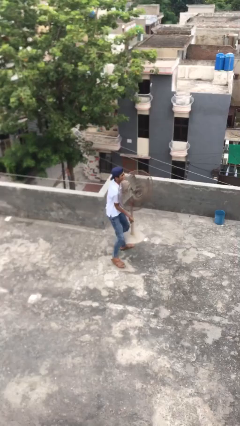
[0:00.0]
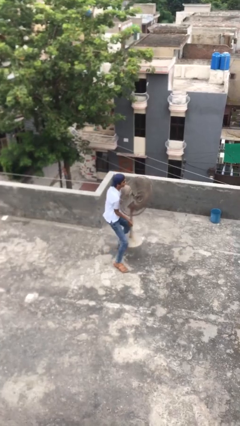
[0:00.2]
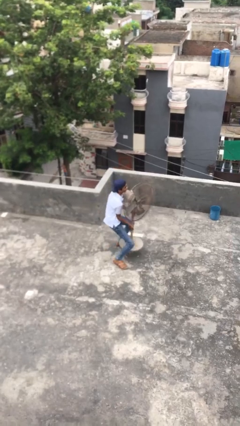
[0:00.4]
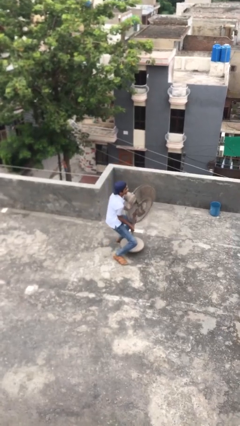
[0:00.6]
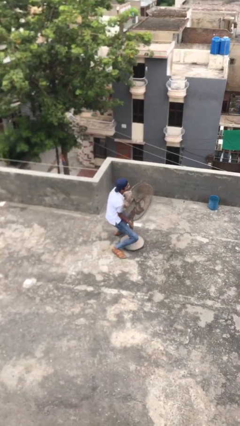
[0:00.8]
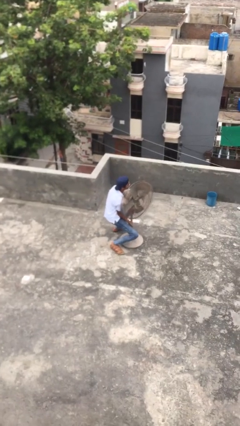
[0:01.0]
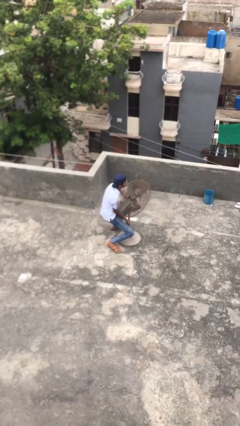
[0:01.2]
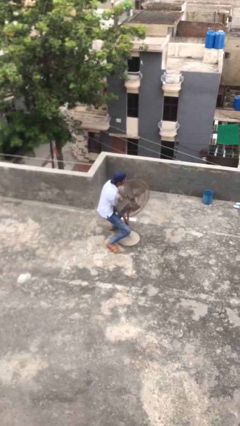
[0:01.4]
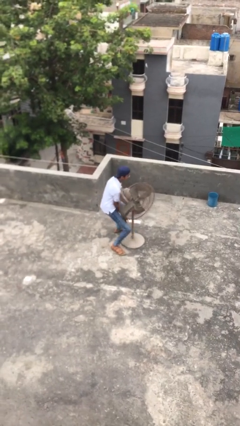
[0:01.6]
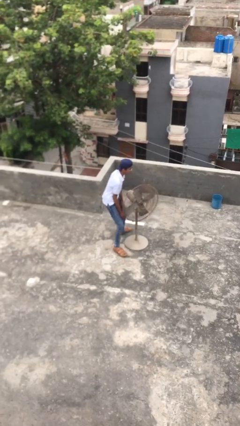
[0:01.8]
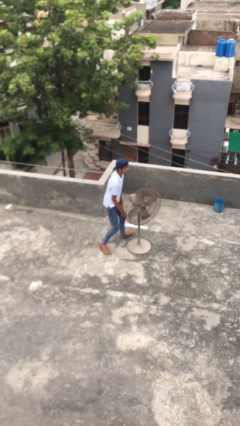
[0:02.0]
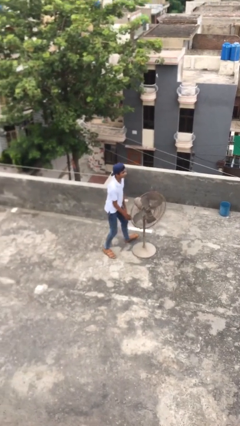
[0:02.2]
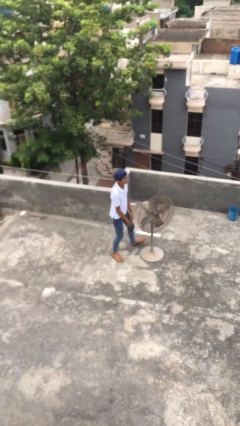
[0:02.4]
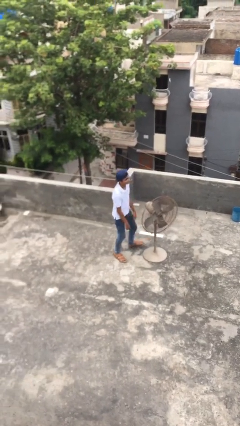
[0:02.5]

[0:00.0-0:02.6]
person puts down object on floor

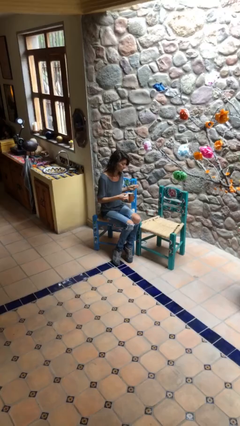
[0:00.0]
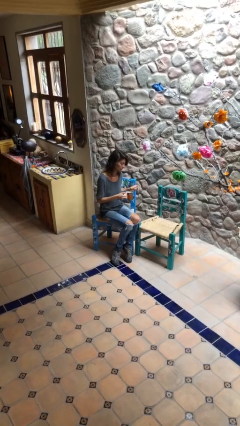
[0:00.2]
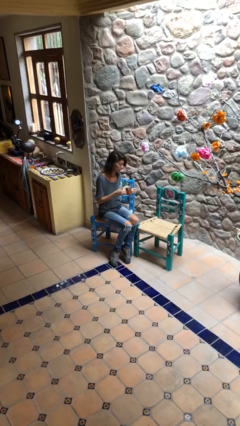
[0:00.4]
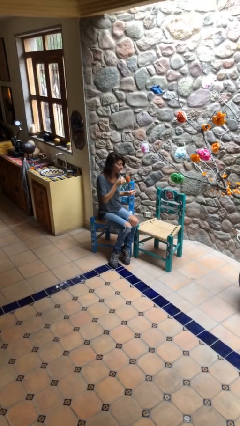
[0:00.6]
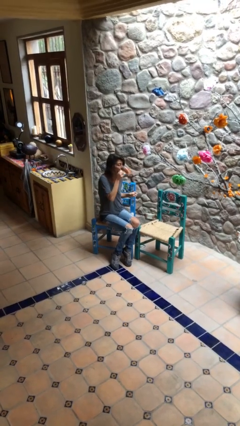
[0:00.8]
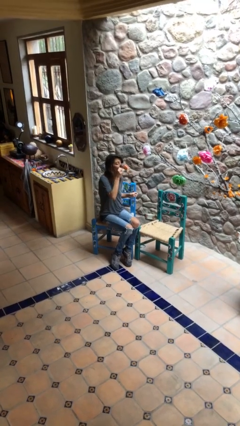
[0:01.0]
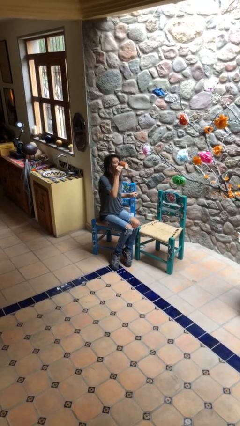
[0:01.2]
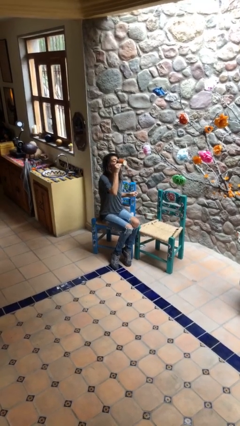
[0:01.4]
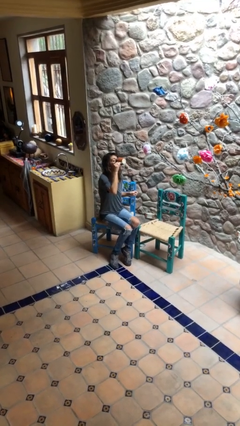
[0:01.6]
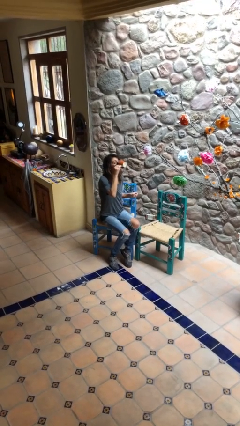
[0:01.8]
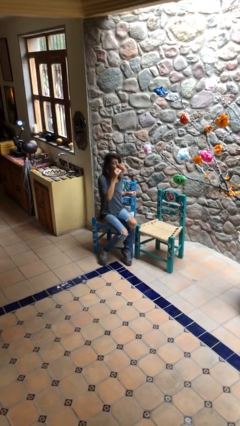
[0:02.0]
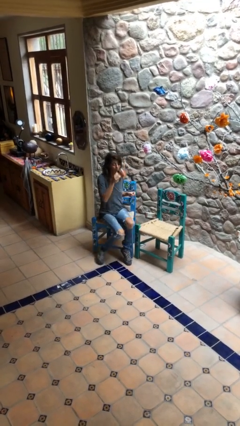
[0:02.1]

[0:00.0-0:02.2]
person drinks from mug

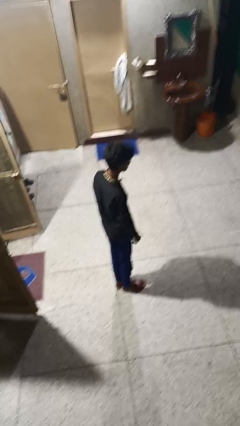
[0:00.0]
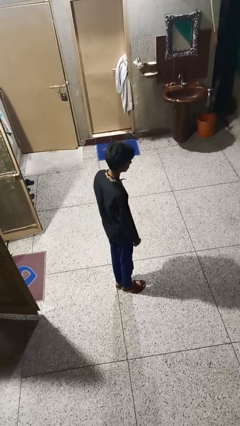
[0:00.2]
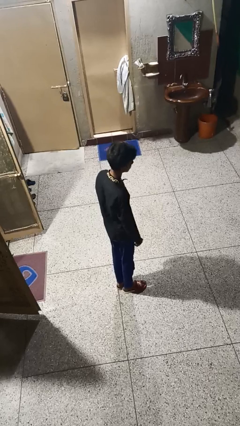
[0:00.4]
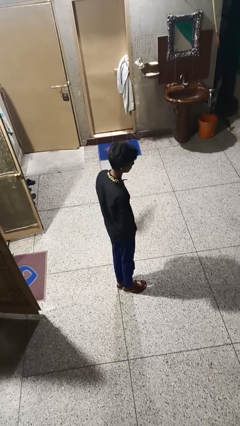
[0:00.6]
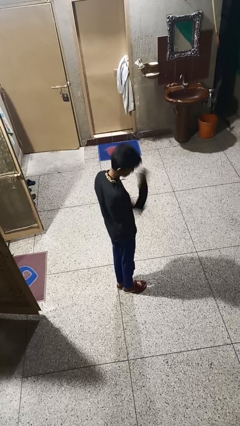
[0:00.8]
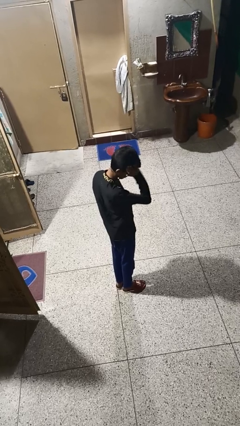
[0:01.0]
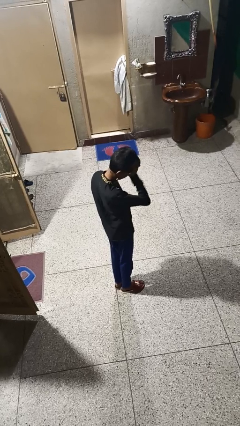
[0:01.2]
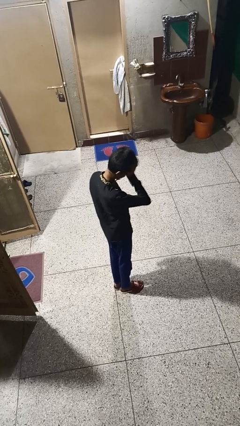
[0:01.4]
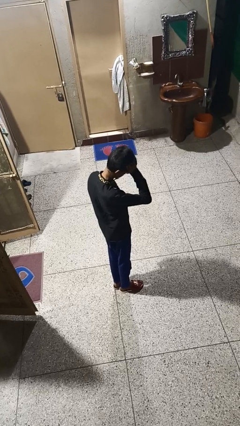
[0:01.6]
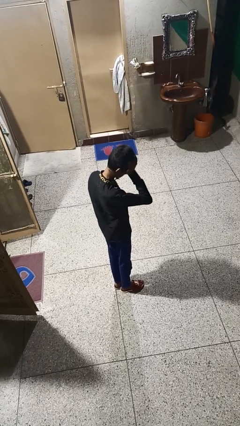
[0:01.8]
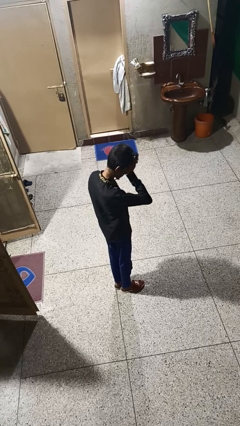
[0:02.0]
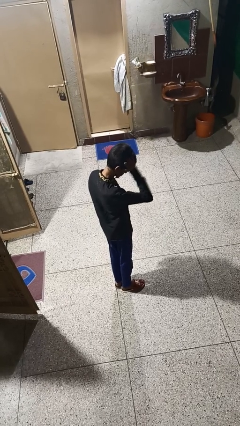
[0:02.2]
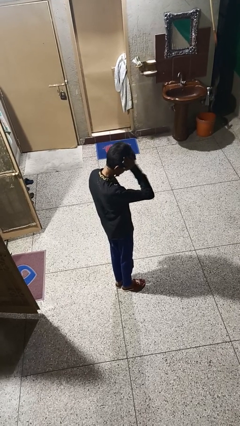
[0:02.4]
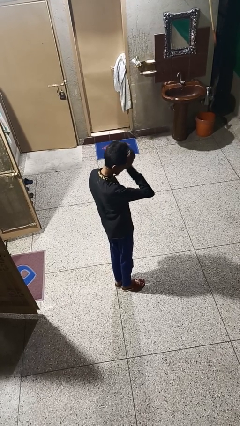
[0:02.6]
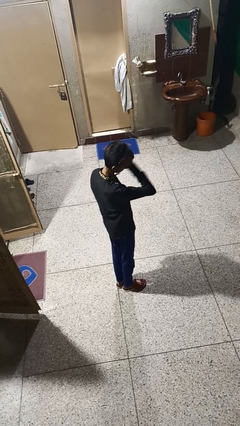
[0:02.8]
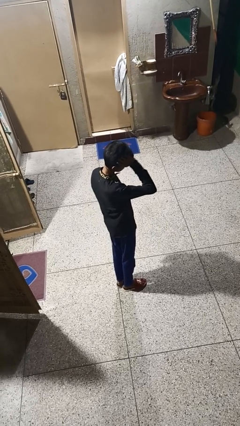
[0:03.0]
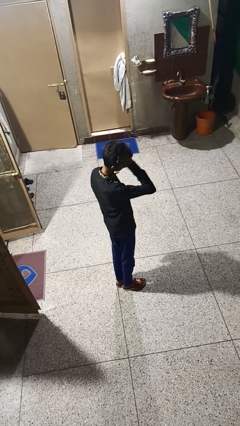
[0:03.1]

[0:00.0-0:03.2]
person rubs eyes

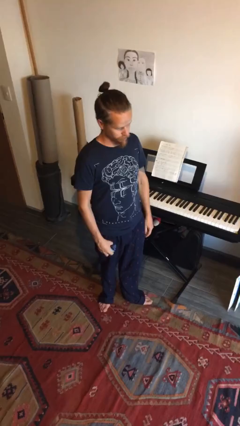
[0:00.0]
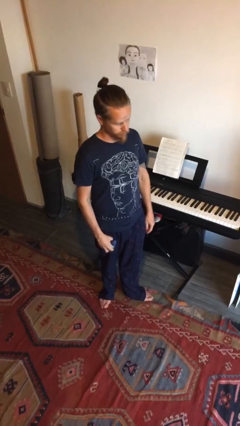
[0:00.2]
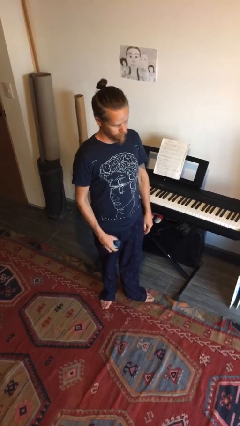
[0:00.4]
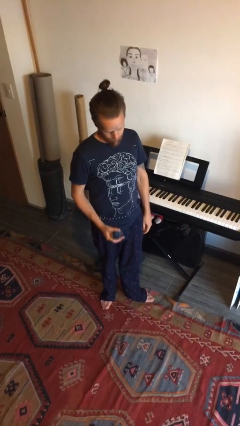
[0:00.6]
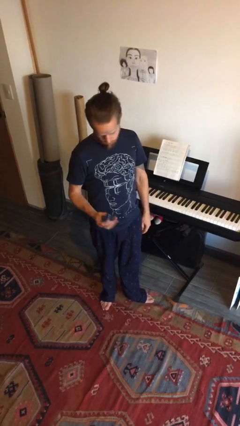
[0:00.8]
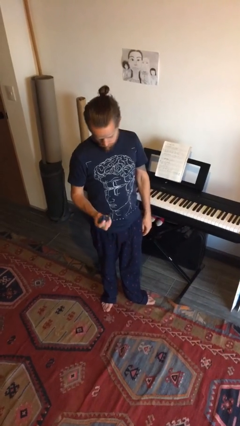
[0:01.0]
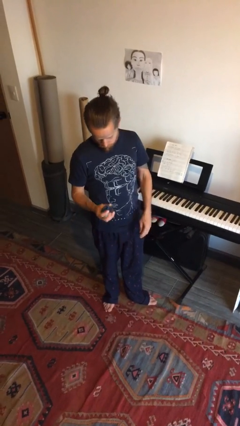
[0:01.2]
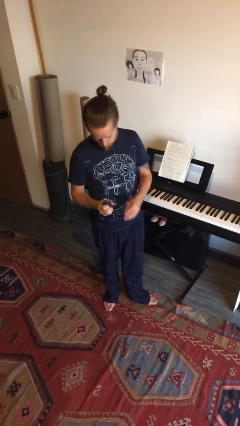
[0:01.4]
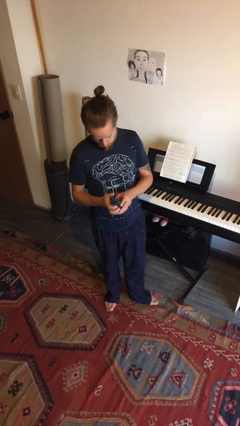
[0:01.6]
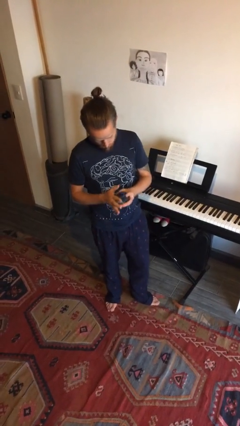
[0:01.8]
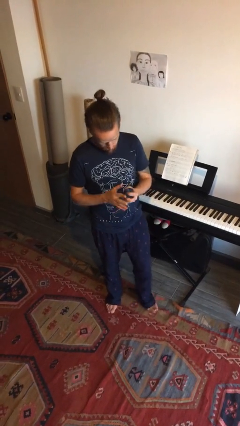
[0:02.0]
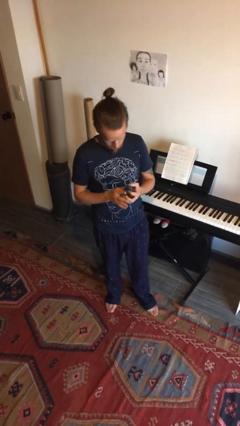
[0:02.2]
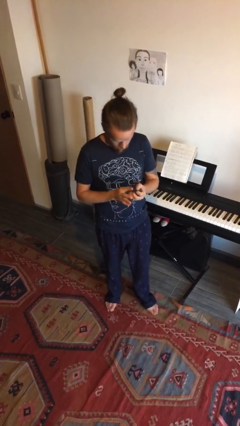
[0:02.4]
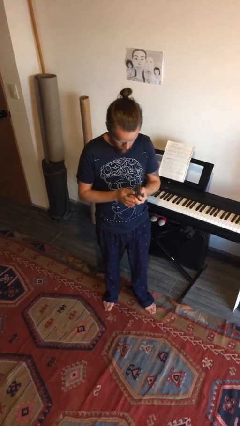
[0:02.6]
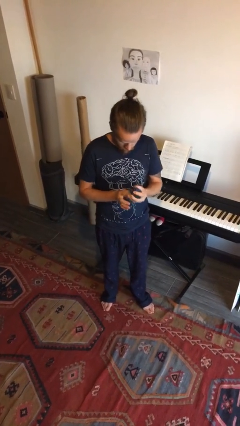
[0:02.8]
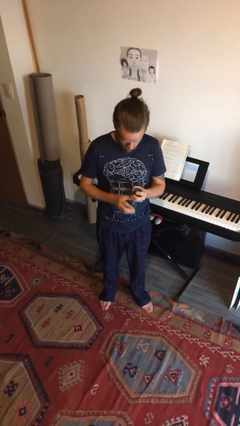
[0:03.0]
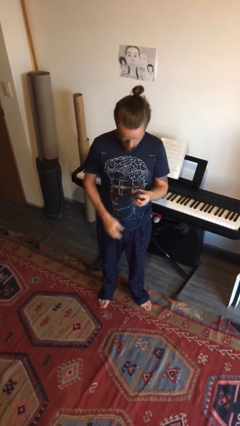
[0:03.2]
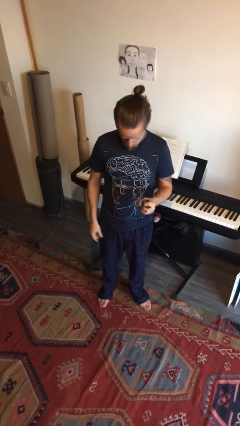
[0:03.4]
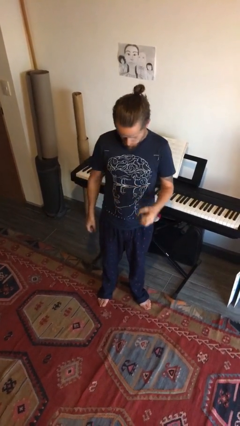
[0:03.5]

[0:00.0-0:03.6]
person squeezes object

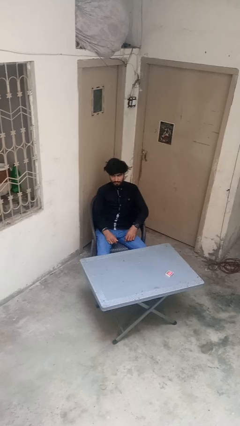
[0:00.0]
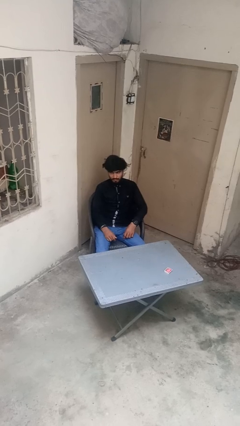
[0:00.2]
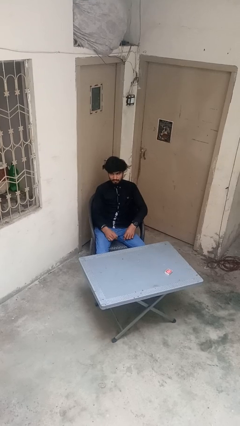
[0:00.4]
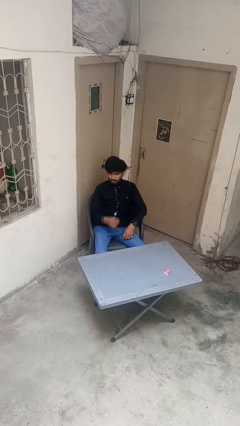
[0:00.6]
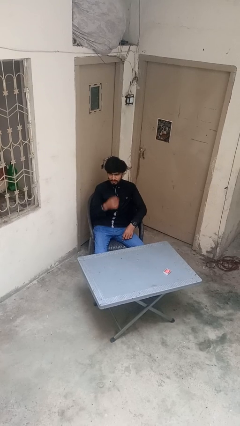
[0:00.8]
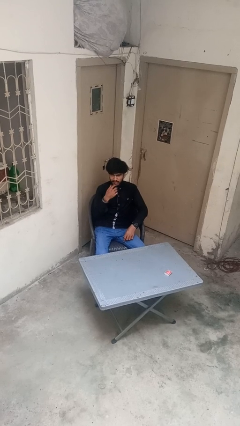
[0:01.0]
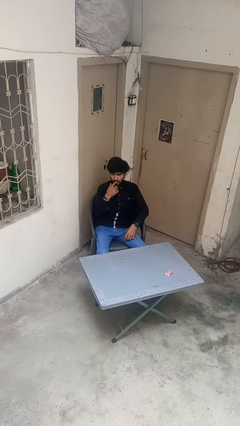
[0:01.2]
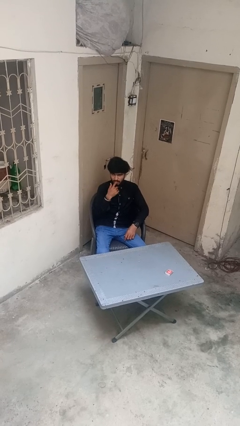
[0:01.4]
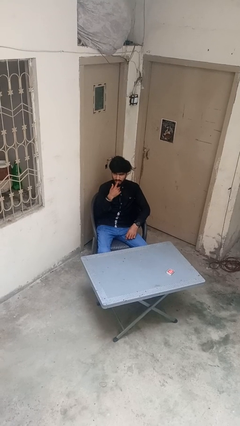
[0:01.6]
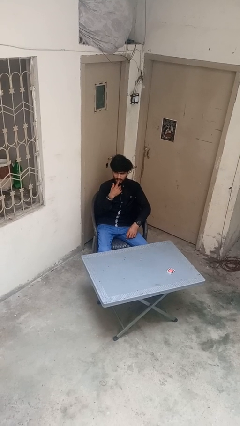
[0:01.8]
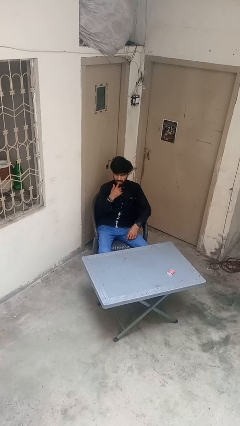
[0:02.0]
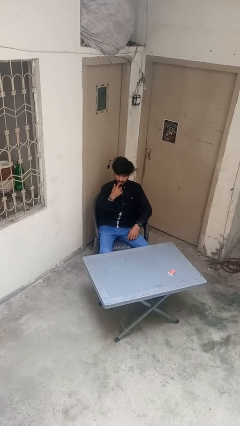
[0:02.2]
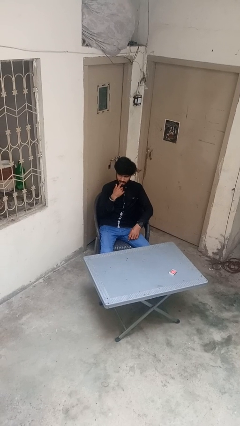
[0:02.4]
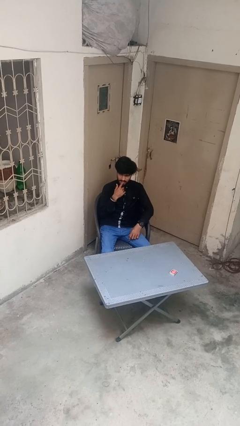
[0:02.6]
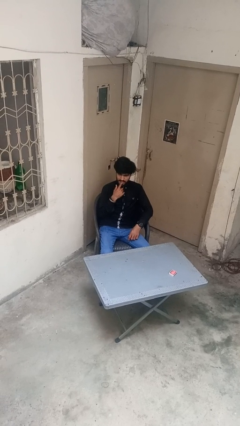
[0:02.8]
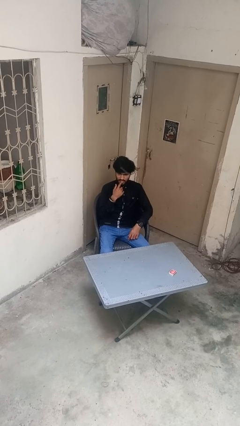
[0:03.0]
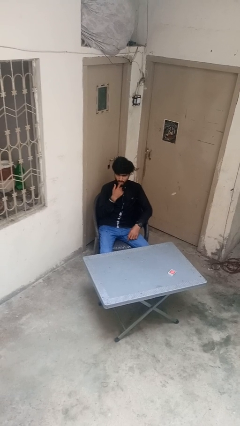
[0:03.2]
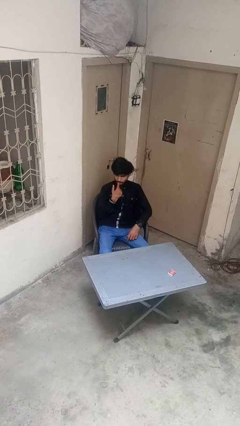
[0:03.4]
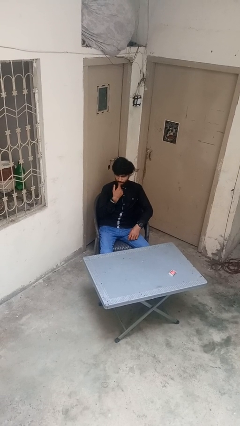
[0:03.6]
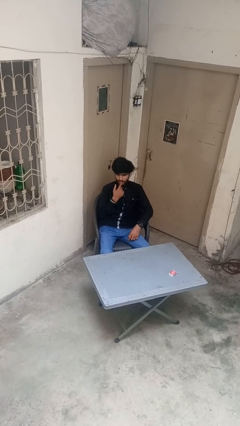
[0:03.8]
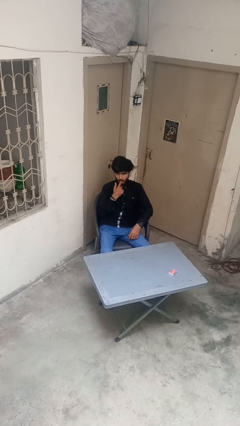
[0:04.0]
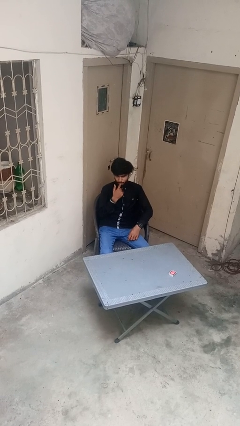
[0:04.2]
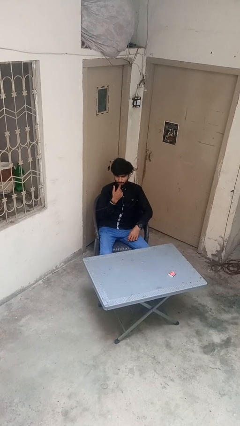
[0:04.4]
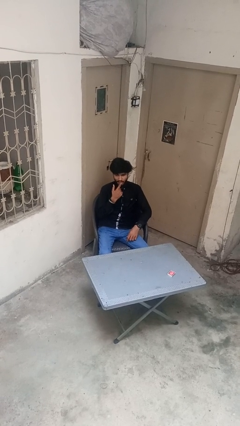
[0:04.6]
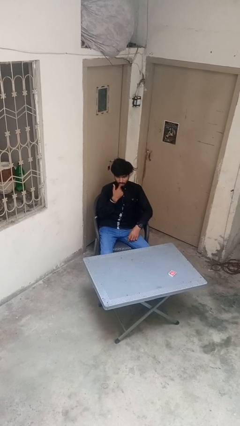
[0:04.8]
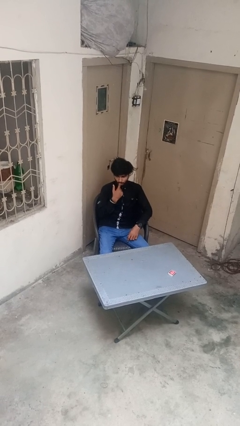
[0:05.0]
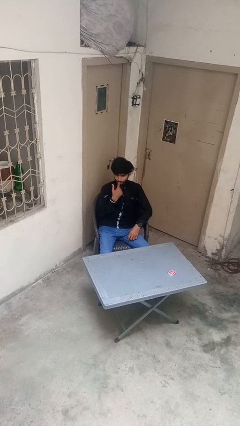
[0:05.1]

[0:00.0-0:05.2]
person licks fingers

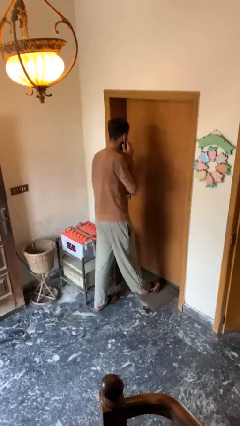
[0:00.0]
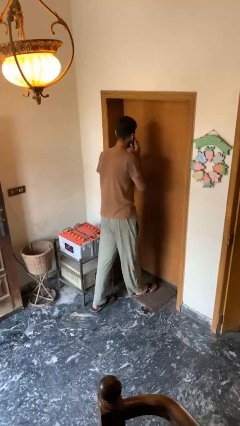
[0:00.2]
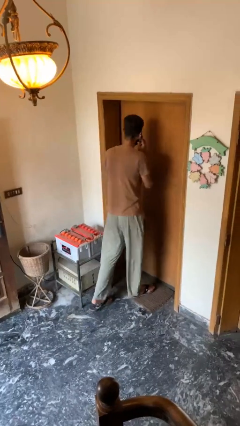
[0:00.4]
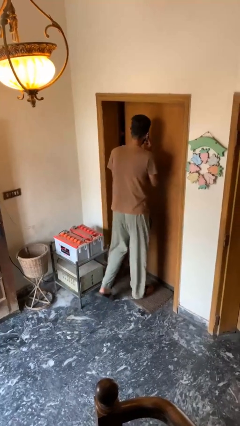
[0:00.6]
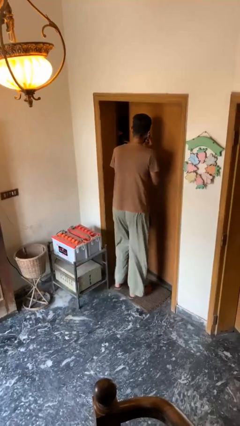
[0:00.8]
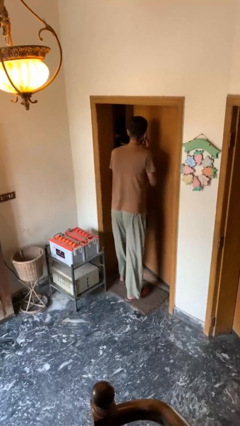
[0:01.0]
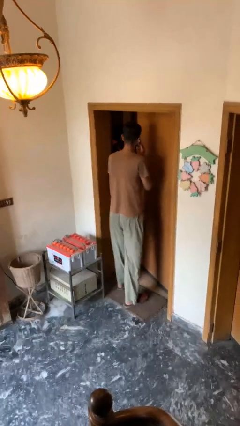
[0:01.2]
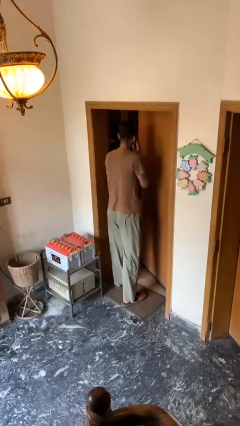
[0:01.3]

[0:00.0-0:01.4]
person opens facility door
